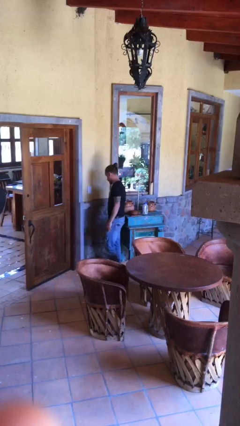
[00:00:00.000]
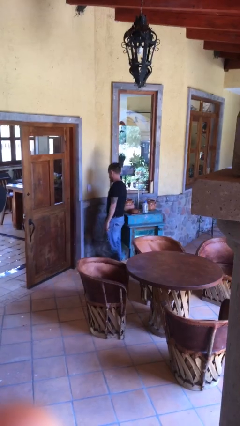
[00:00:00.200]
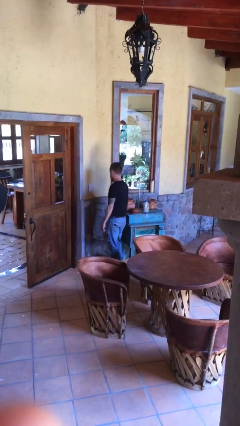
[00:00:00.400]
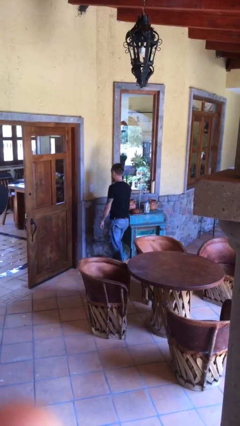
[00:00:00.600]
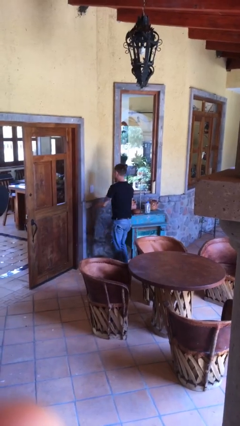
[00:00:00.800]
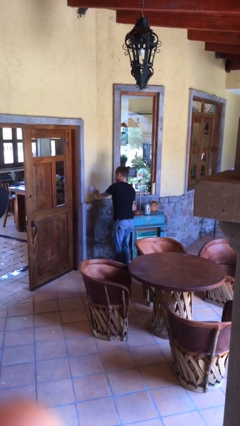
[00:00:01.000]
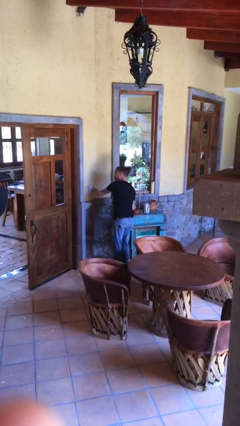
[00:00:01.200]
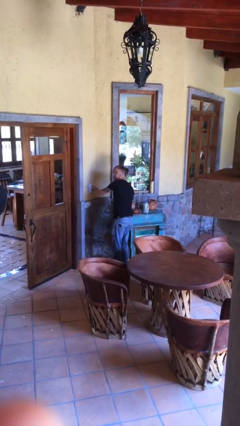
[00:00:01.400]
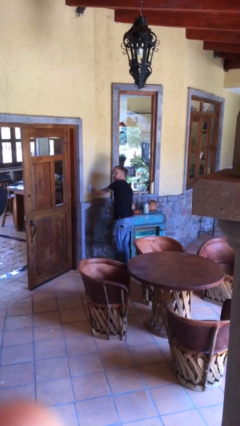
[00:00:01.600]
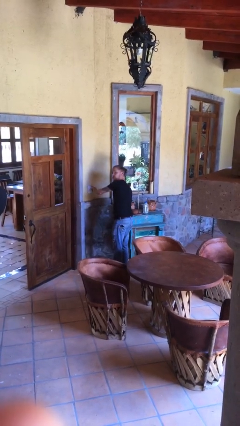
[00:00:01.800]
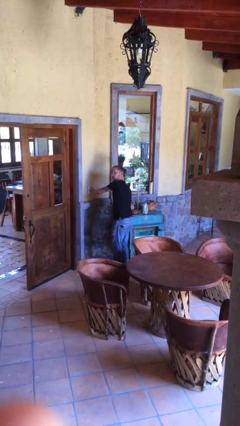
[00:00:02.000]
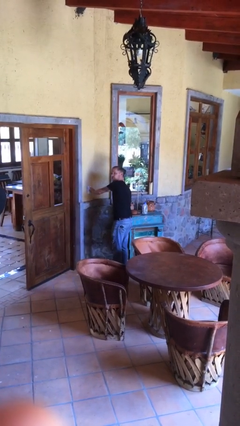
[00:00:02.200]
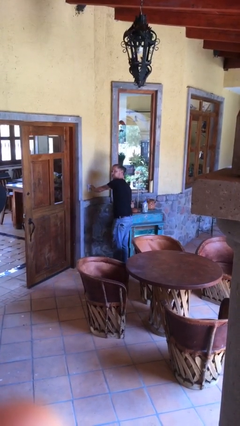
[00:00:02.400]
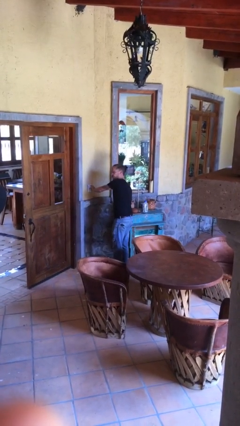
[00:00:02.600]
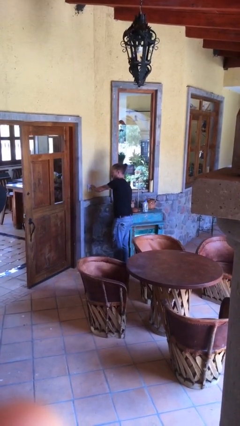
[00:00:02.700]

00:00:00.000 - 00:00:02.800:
person adjusts thermostat

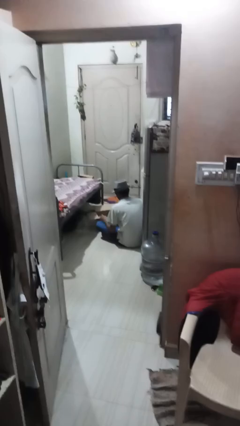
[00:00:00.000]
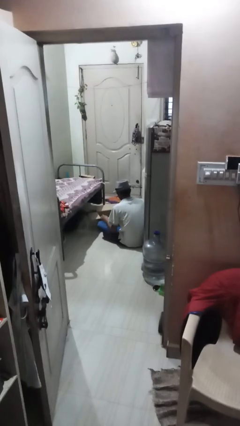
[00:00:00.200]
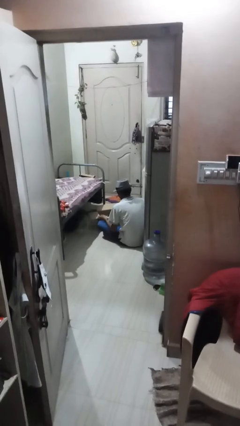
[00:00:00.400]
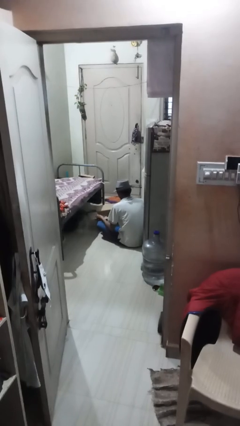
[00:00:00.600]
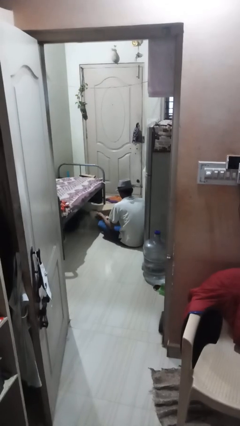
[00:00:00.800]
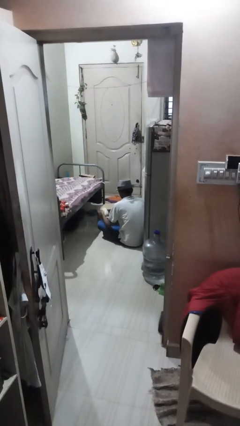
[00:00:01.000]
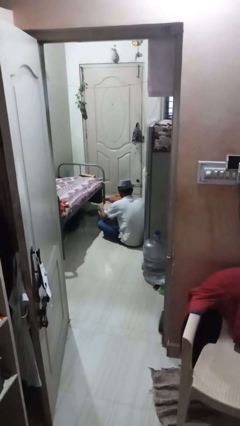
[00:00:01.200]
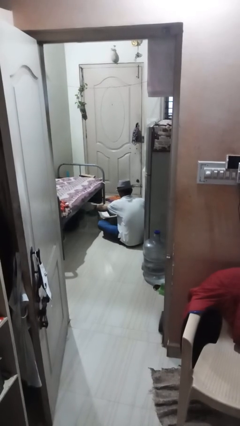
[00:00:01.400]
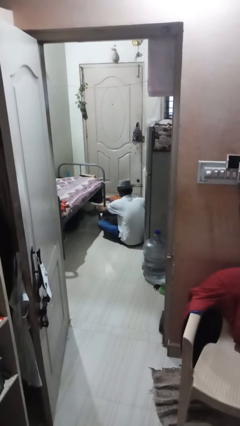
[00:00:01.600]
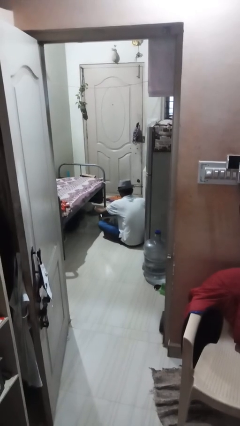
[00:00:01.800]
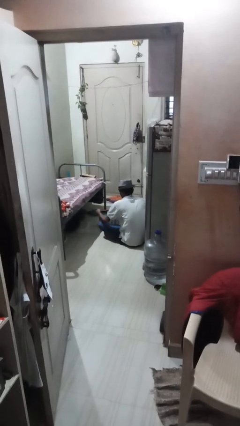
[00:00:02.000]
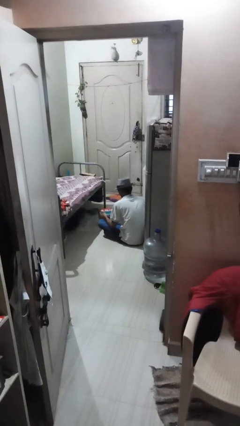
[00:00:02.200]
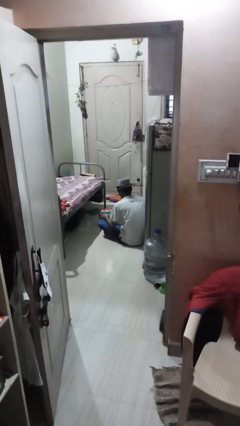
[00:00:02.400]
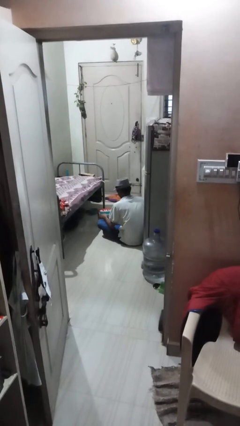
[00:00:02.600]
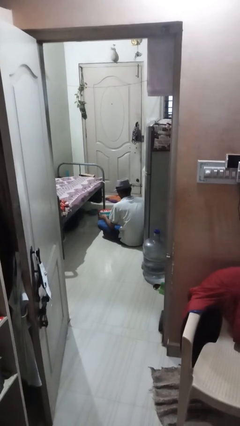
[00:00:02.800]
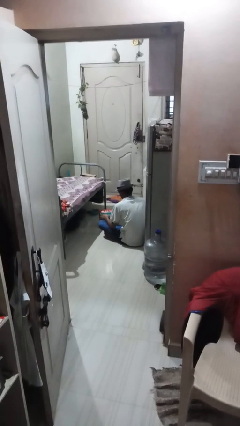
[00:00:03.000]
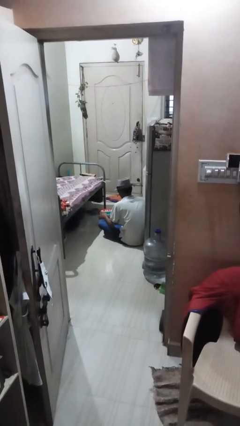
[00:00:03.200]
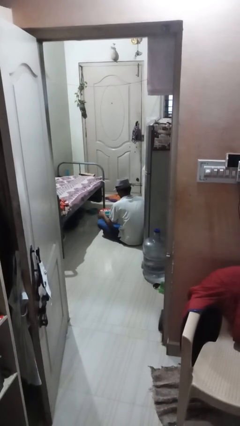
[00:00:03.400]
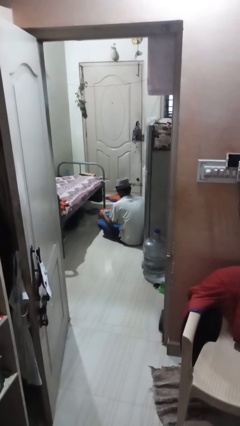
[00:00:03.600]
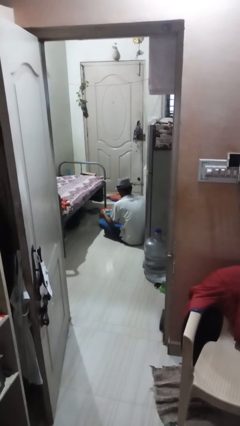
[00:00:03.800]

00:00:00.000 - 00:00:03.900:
person closes box

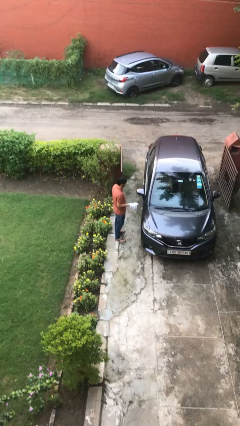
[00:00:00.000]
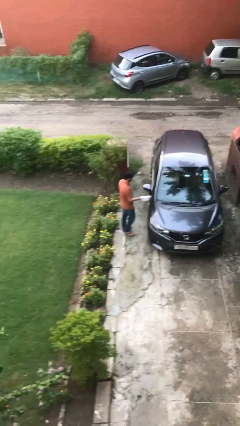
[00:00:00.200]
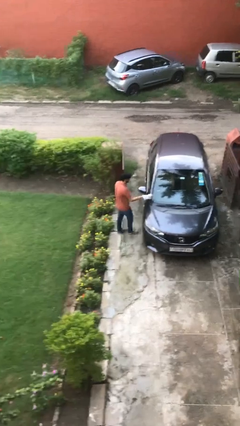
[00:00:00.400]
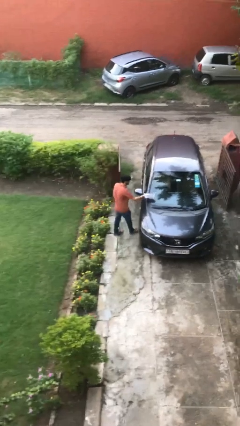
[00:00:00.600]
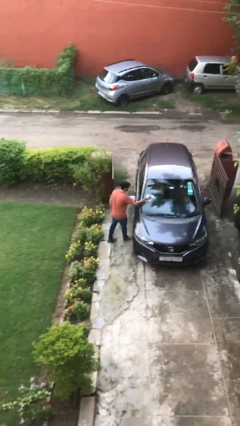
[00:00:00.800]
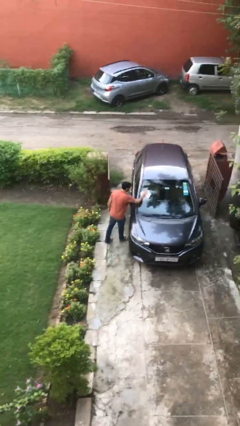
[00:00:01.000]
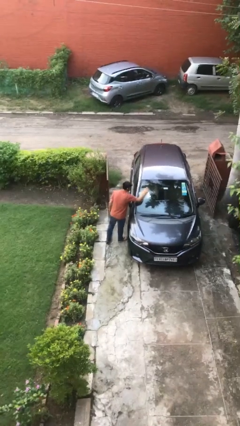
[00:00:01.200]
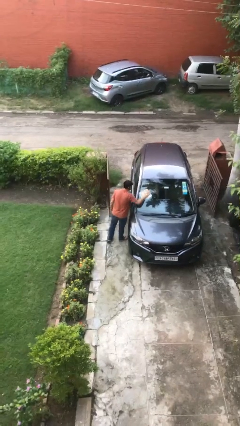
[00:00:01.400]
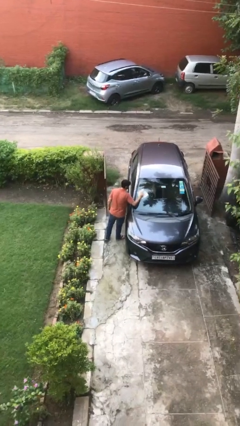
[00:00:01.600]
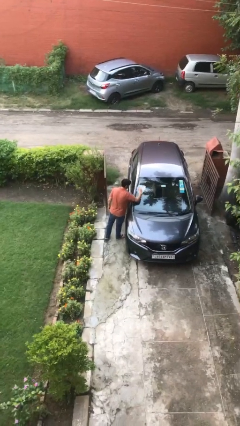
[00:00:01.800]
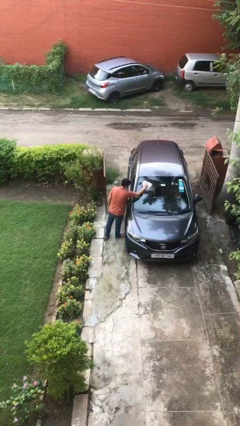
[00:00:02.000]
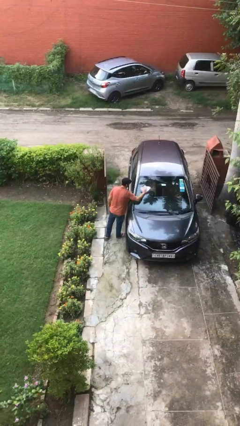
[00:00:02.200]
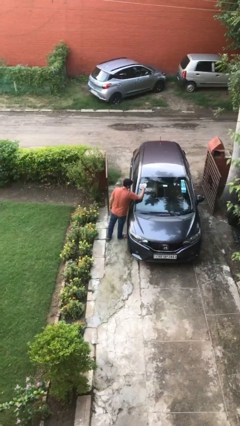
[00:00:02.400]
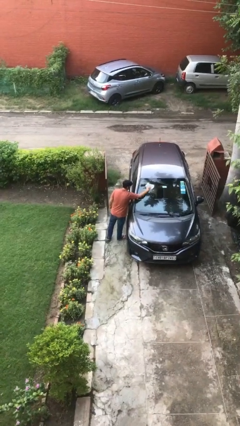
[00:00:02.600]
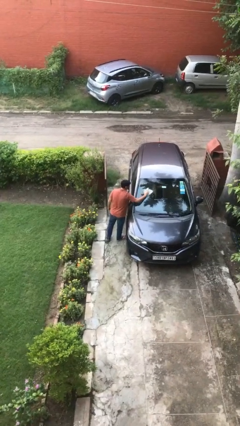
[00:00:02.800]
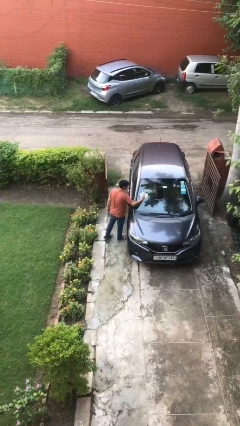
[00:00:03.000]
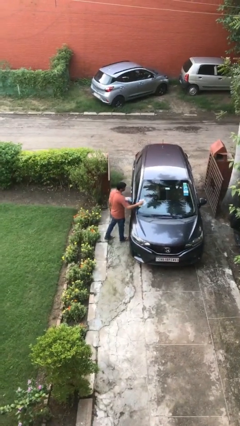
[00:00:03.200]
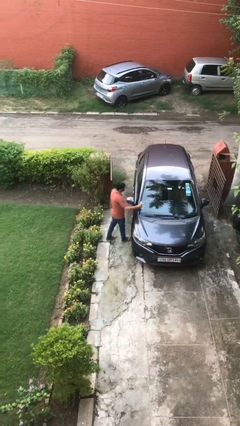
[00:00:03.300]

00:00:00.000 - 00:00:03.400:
person polishes car with rag

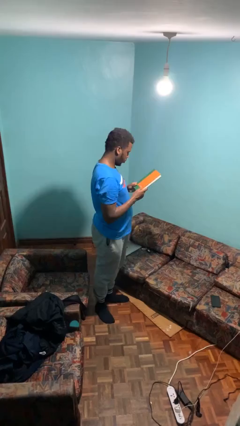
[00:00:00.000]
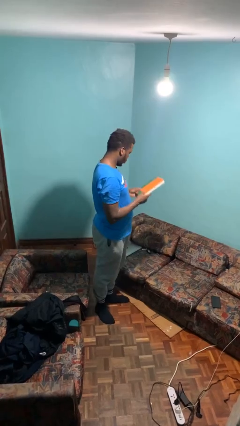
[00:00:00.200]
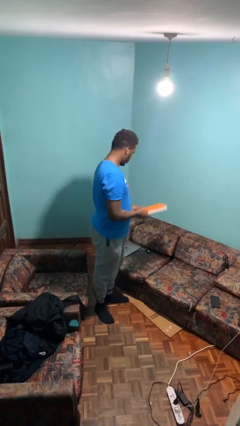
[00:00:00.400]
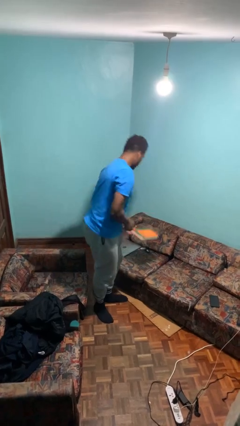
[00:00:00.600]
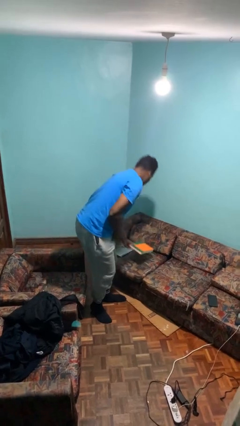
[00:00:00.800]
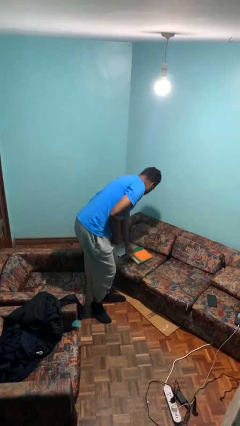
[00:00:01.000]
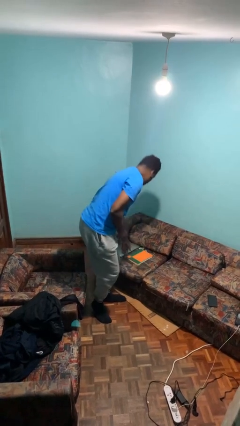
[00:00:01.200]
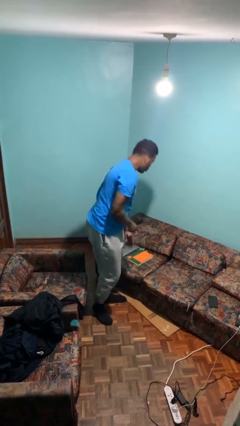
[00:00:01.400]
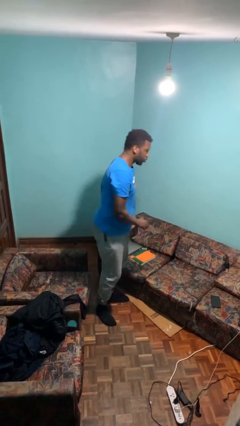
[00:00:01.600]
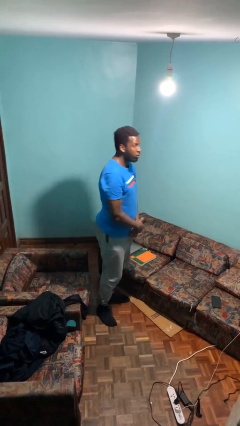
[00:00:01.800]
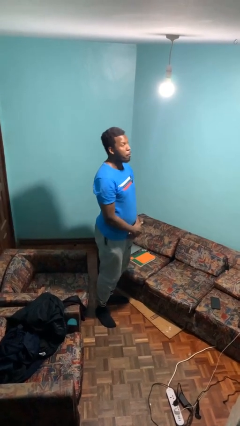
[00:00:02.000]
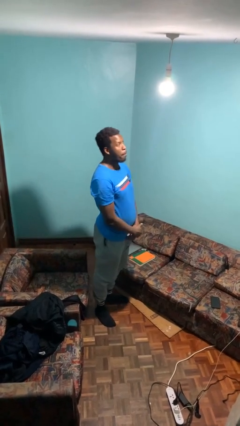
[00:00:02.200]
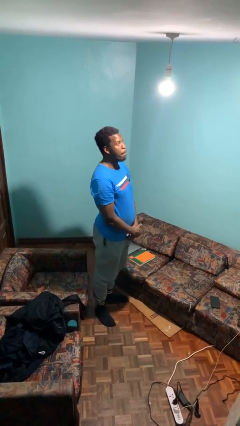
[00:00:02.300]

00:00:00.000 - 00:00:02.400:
person puts down object on couch

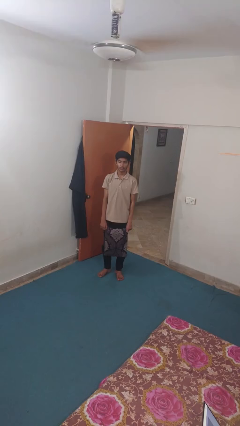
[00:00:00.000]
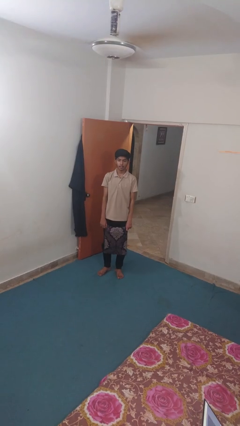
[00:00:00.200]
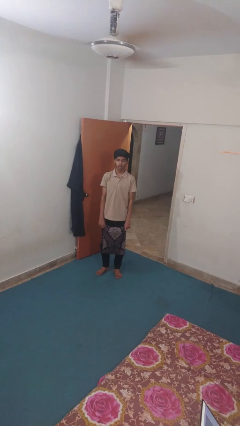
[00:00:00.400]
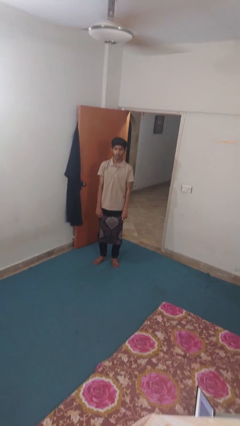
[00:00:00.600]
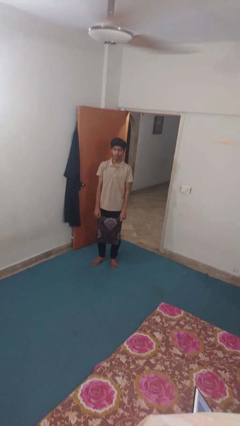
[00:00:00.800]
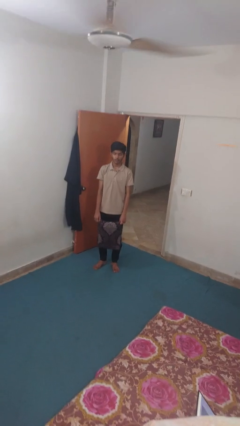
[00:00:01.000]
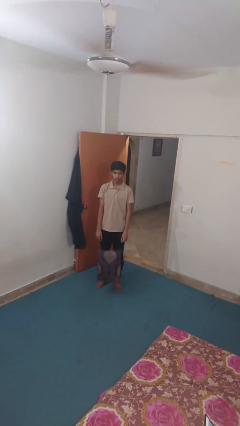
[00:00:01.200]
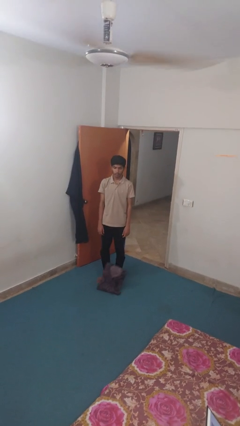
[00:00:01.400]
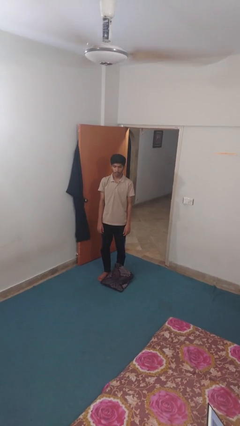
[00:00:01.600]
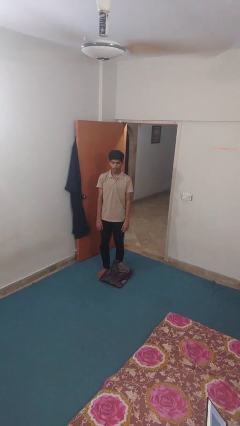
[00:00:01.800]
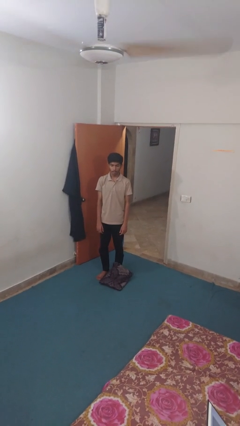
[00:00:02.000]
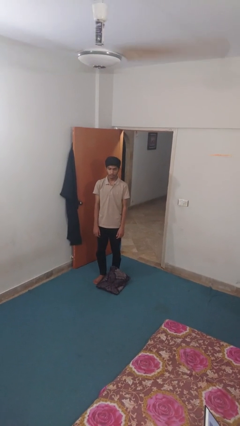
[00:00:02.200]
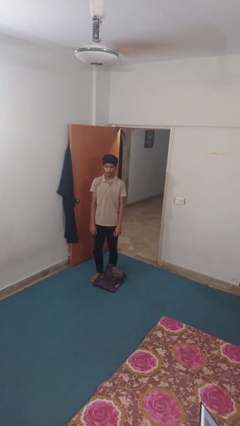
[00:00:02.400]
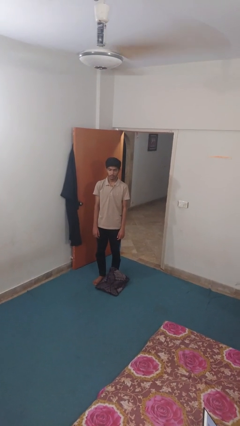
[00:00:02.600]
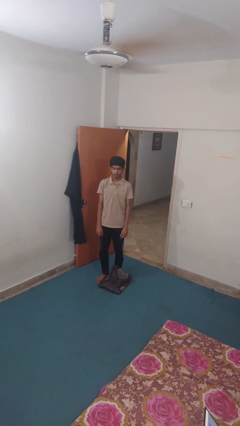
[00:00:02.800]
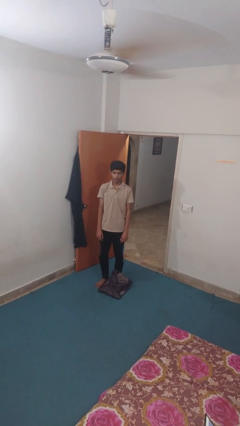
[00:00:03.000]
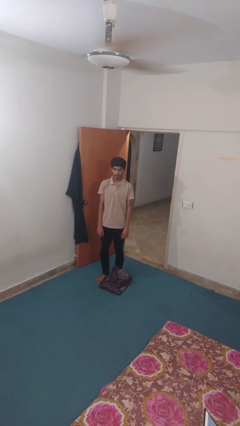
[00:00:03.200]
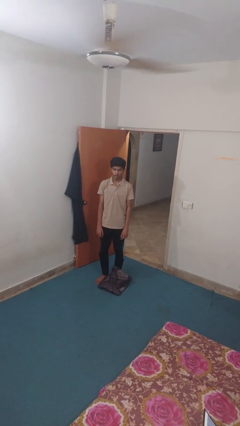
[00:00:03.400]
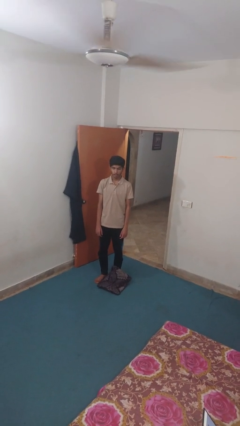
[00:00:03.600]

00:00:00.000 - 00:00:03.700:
person drops object

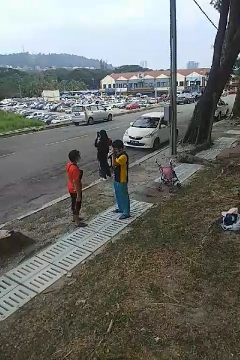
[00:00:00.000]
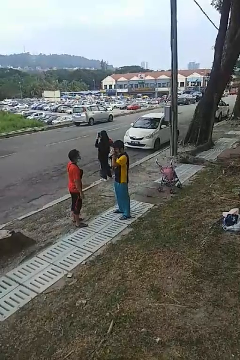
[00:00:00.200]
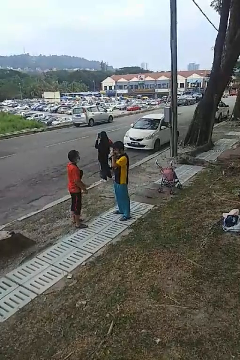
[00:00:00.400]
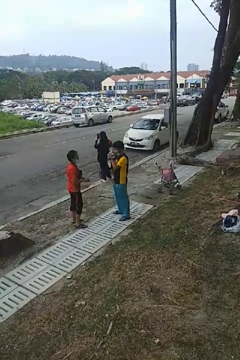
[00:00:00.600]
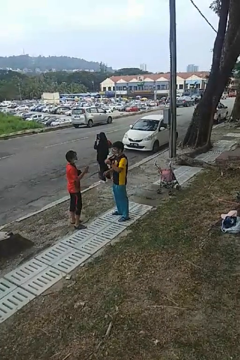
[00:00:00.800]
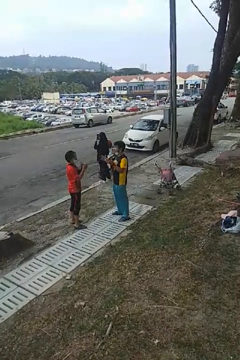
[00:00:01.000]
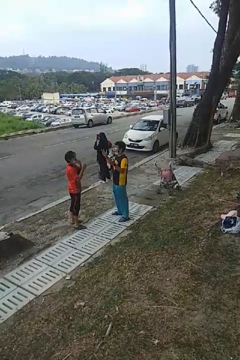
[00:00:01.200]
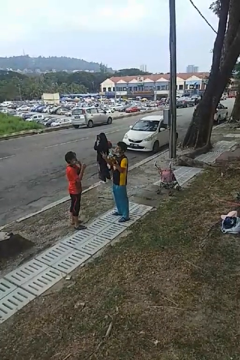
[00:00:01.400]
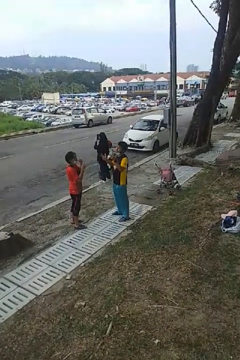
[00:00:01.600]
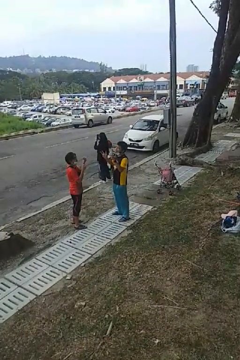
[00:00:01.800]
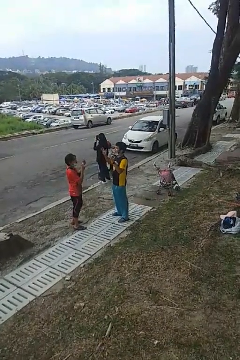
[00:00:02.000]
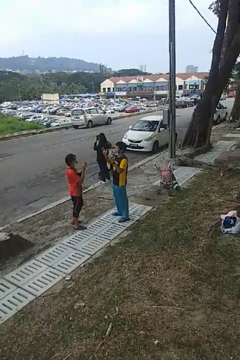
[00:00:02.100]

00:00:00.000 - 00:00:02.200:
person talks to person
